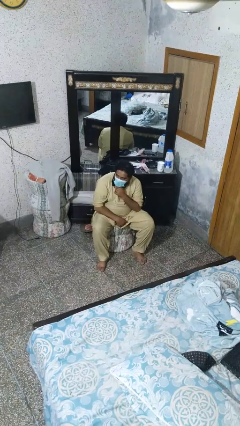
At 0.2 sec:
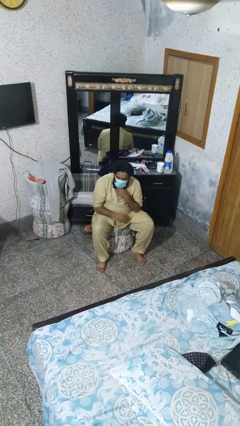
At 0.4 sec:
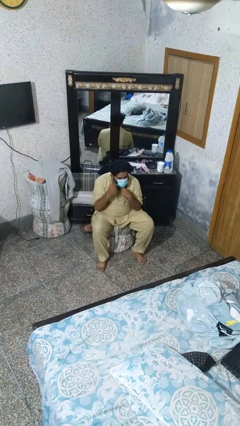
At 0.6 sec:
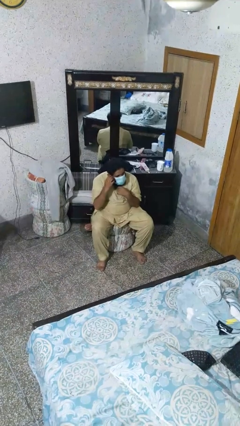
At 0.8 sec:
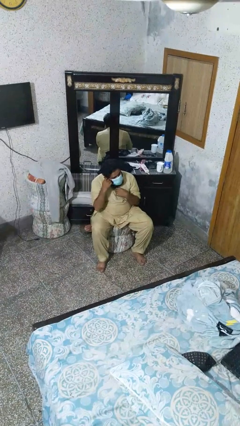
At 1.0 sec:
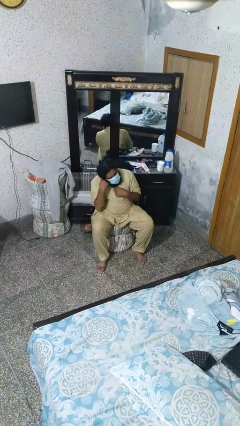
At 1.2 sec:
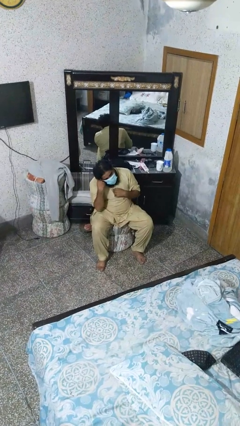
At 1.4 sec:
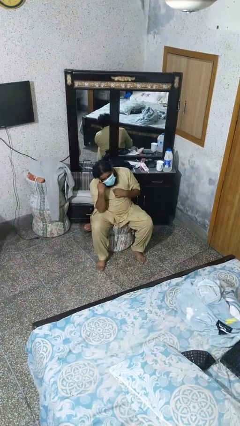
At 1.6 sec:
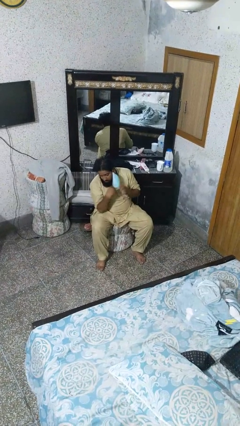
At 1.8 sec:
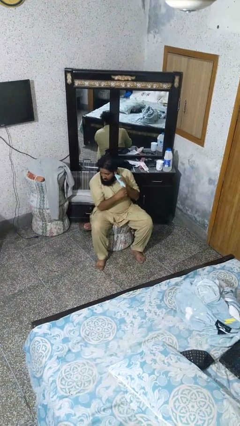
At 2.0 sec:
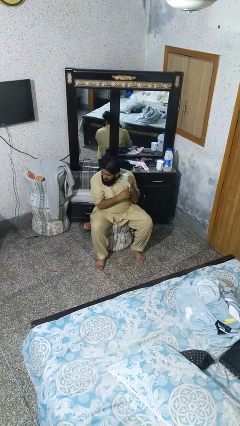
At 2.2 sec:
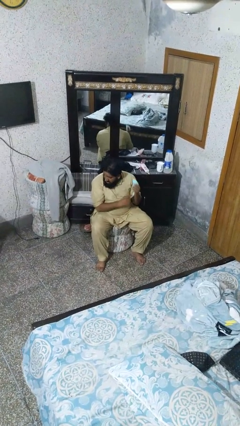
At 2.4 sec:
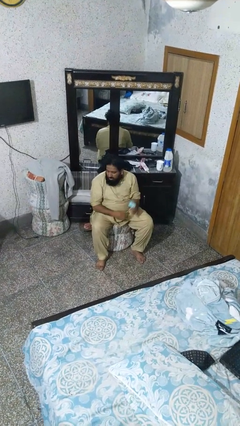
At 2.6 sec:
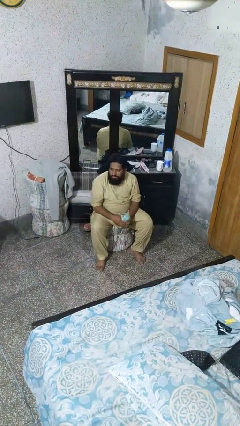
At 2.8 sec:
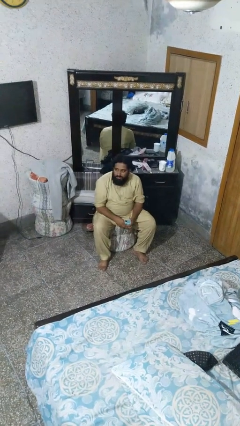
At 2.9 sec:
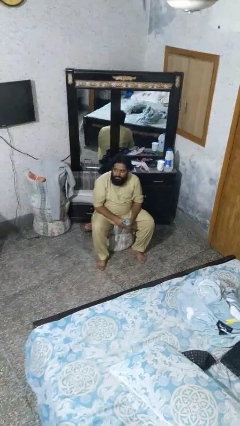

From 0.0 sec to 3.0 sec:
person takes off facemask

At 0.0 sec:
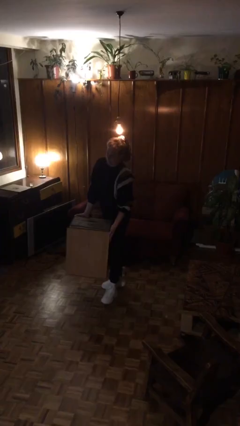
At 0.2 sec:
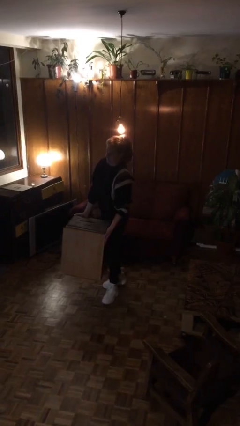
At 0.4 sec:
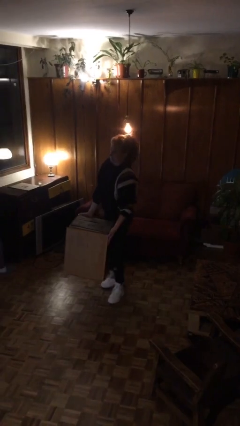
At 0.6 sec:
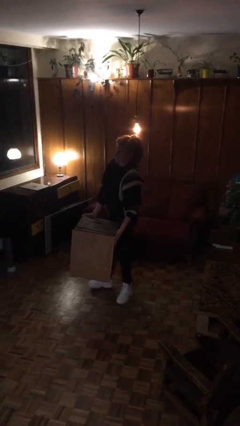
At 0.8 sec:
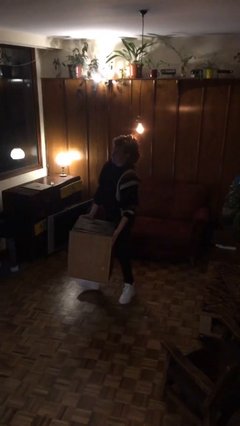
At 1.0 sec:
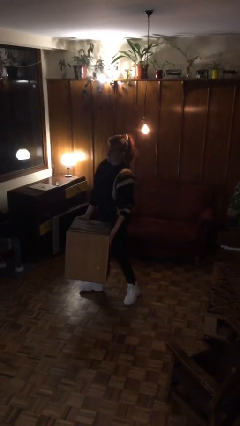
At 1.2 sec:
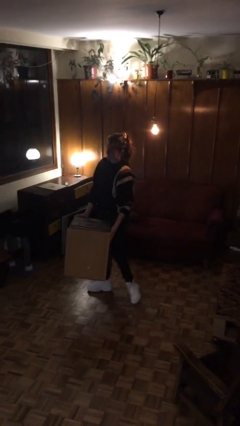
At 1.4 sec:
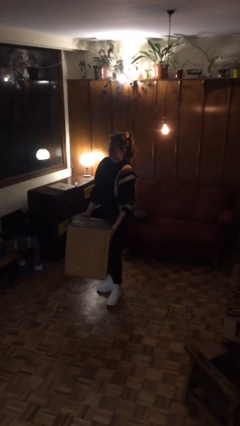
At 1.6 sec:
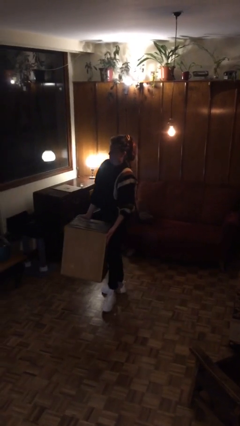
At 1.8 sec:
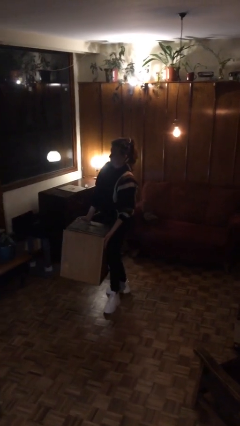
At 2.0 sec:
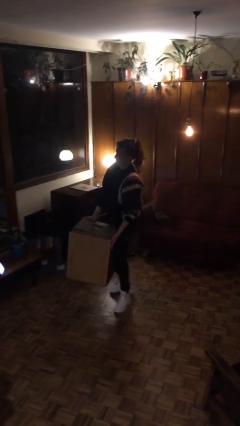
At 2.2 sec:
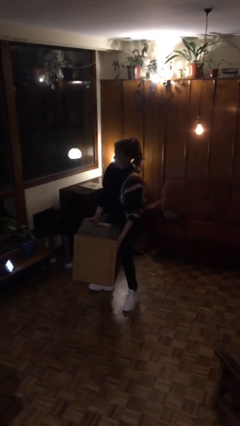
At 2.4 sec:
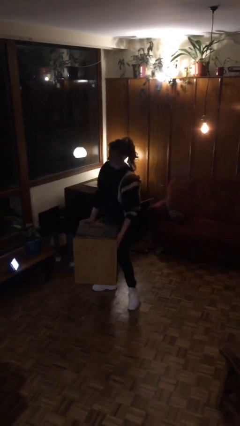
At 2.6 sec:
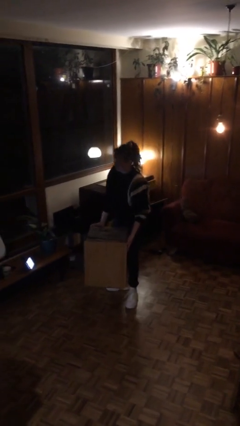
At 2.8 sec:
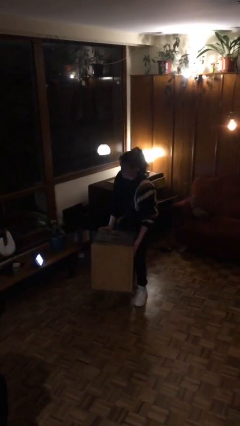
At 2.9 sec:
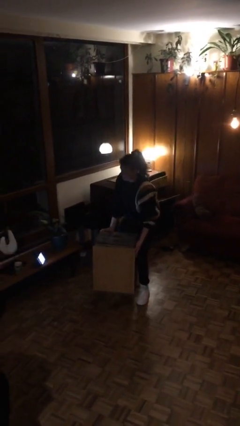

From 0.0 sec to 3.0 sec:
person carries heavy object

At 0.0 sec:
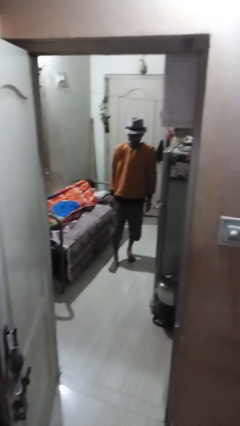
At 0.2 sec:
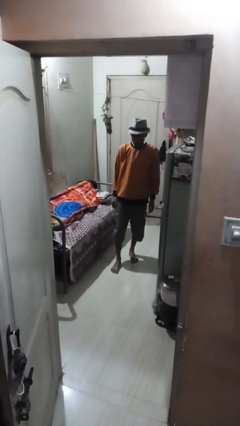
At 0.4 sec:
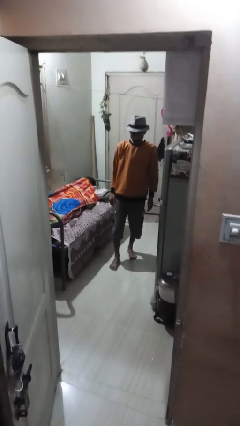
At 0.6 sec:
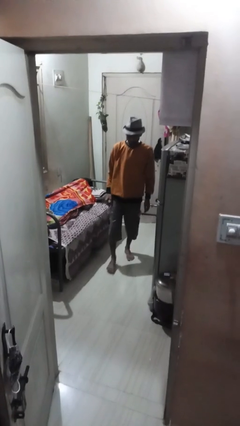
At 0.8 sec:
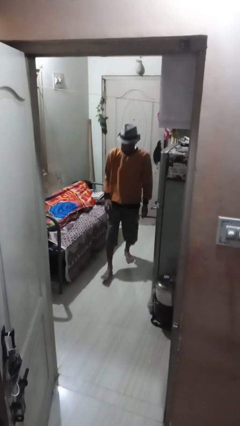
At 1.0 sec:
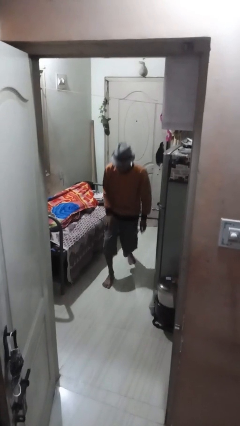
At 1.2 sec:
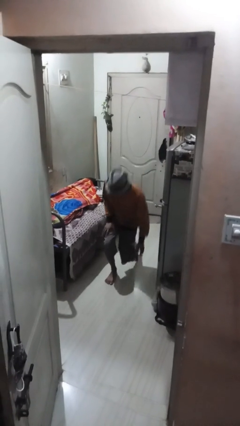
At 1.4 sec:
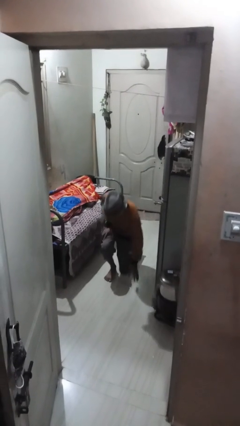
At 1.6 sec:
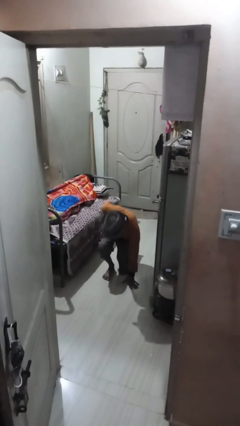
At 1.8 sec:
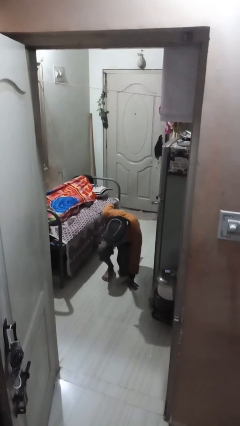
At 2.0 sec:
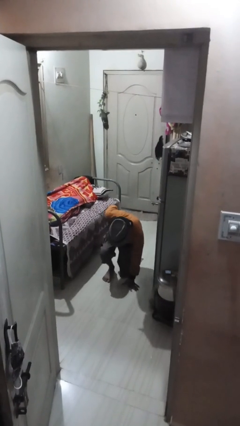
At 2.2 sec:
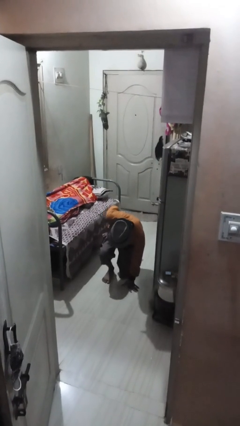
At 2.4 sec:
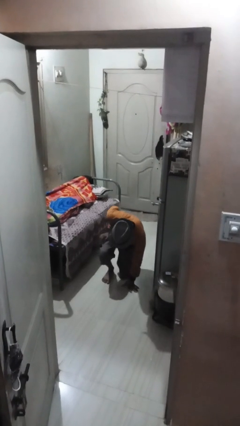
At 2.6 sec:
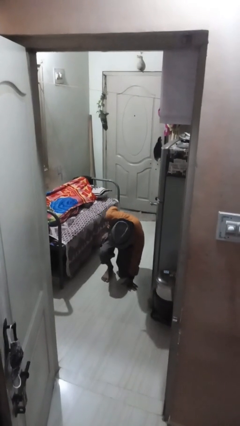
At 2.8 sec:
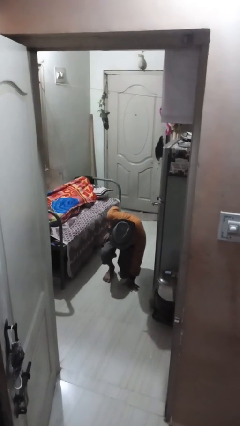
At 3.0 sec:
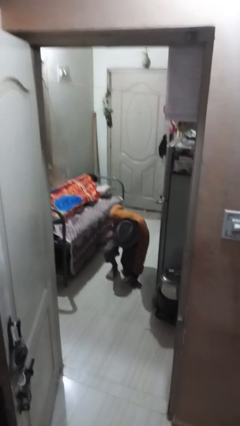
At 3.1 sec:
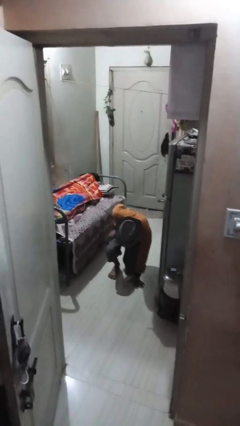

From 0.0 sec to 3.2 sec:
person kneels

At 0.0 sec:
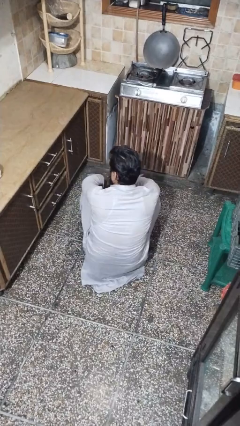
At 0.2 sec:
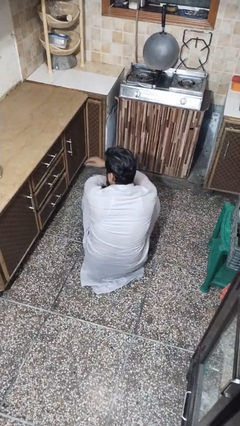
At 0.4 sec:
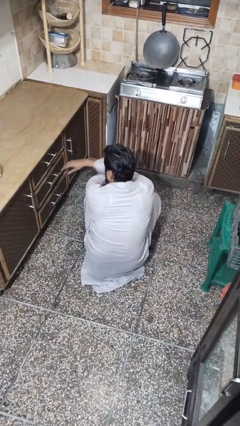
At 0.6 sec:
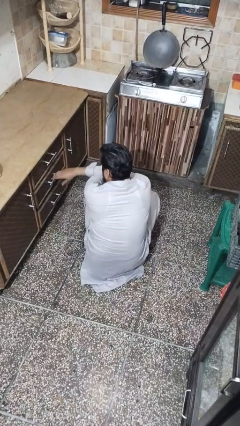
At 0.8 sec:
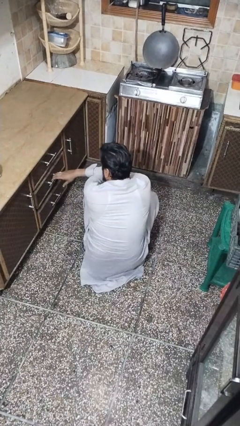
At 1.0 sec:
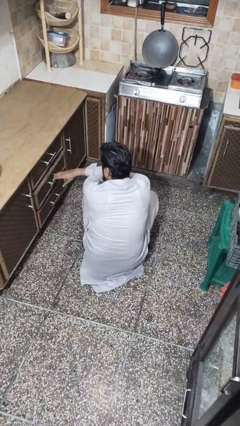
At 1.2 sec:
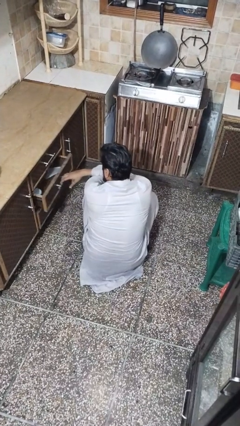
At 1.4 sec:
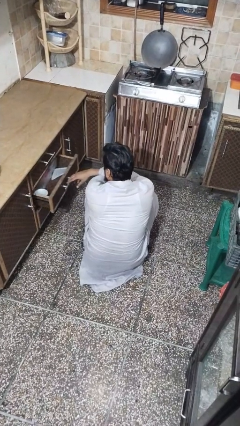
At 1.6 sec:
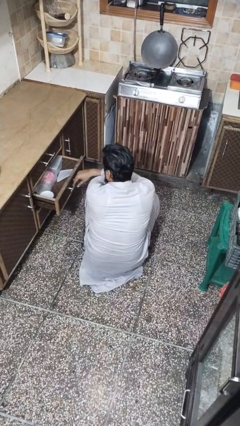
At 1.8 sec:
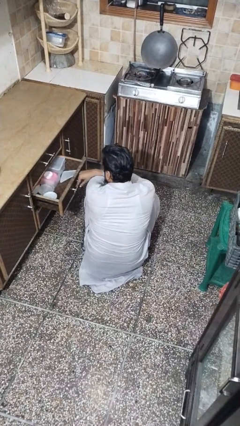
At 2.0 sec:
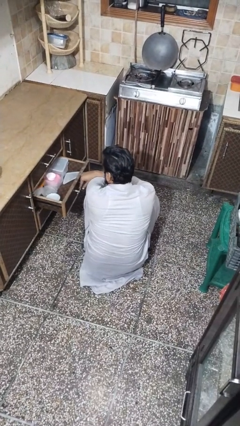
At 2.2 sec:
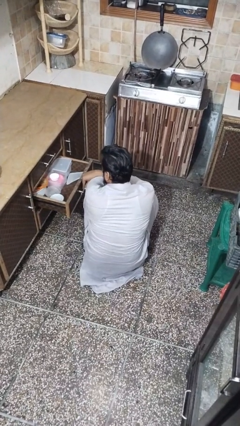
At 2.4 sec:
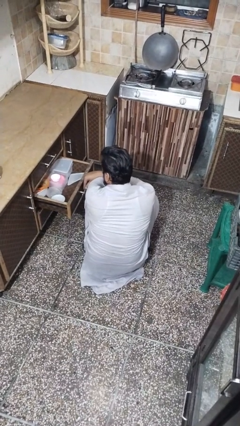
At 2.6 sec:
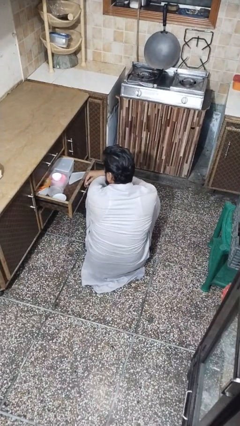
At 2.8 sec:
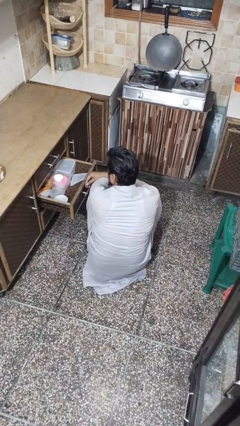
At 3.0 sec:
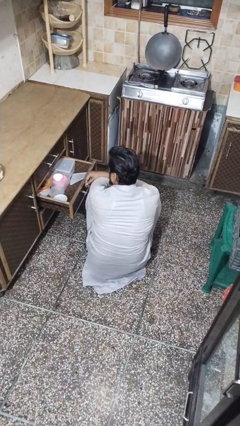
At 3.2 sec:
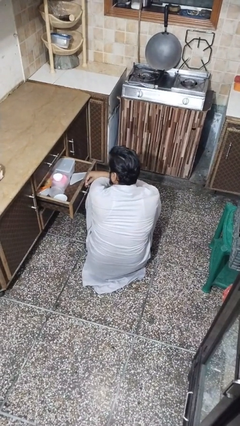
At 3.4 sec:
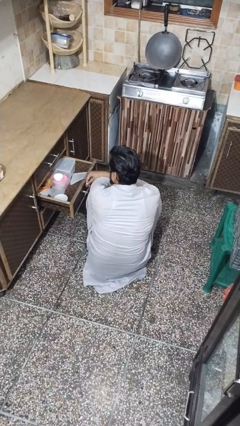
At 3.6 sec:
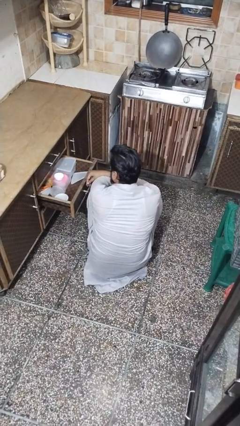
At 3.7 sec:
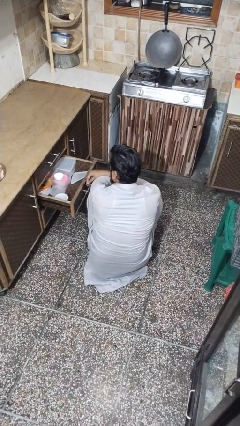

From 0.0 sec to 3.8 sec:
person opens kitchen drawer

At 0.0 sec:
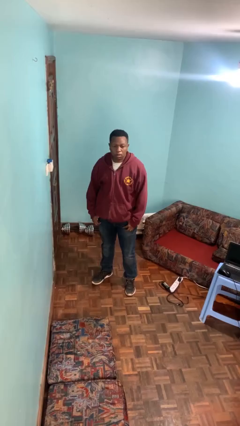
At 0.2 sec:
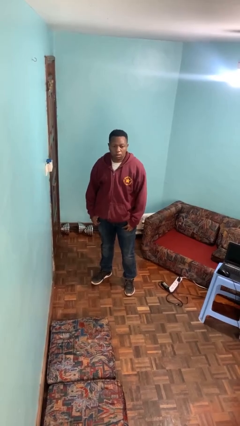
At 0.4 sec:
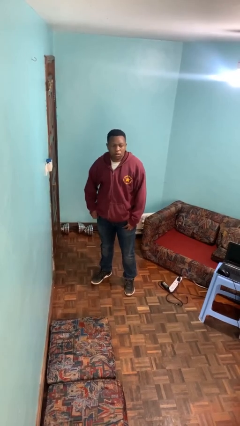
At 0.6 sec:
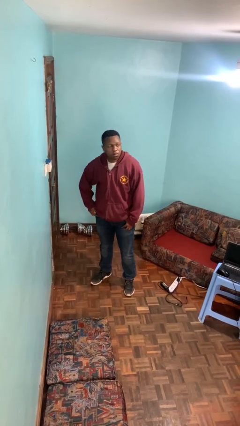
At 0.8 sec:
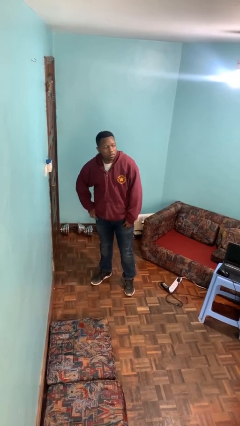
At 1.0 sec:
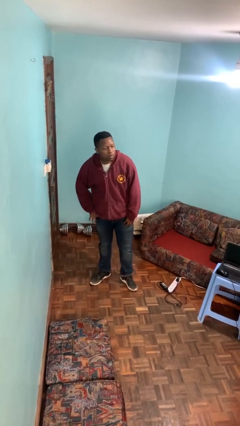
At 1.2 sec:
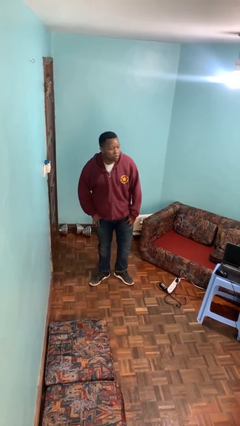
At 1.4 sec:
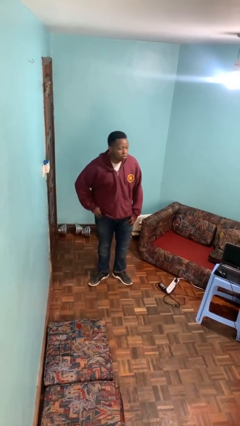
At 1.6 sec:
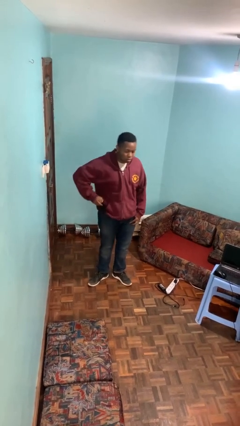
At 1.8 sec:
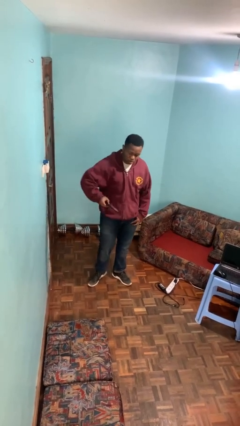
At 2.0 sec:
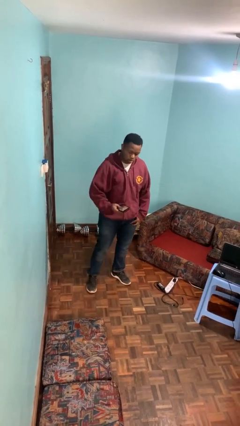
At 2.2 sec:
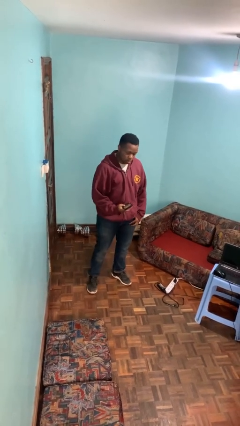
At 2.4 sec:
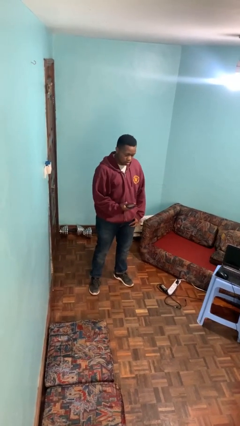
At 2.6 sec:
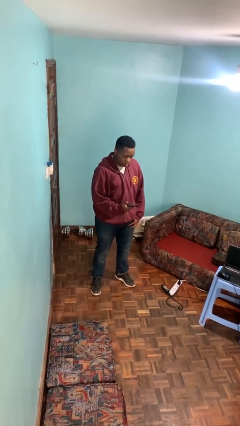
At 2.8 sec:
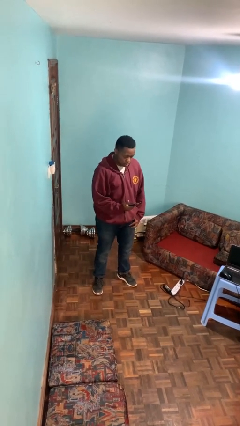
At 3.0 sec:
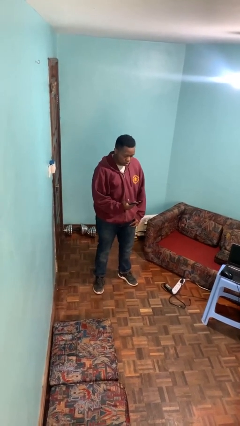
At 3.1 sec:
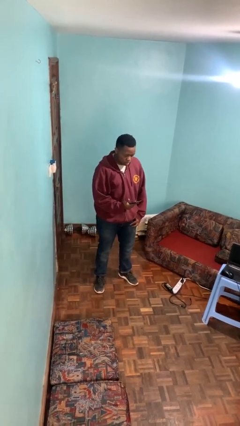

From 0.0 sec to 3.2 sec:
person takes phone from pocket

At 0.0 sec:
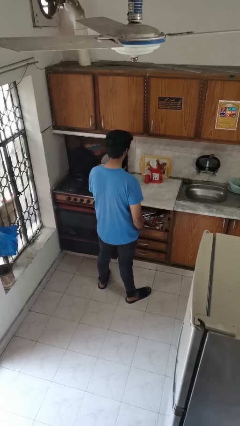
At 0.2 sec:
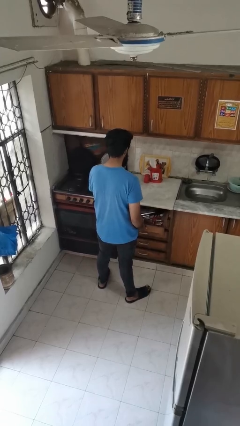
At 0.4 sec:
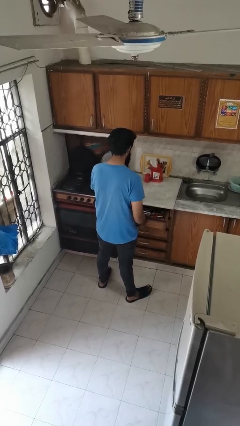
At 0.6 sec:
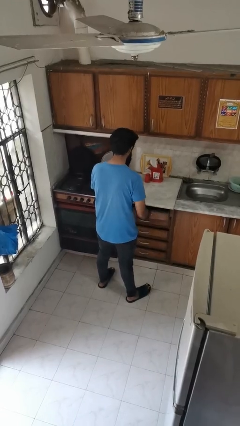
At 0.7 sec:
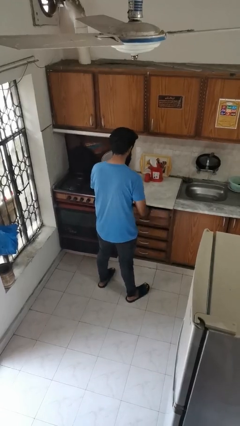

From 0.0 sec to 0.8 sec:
person closes kitchen drawer
